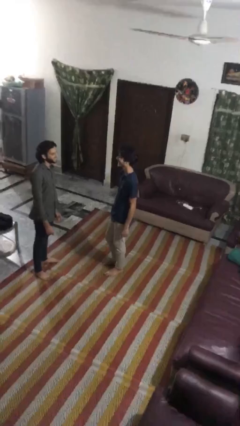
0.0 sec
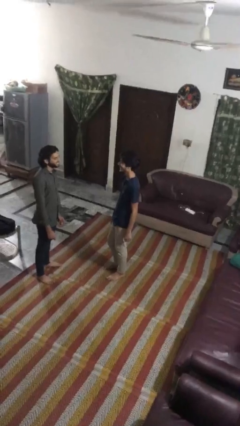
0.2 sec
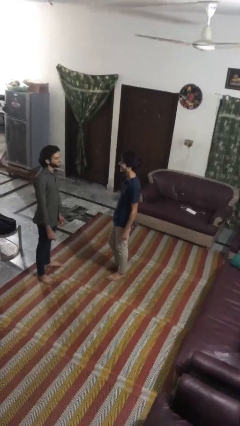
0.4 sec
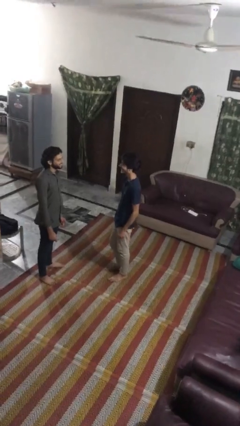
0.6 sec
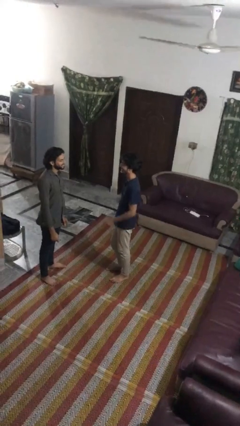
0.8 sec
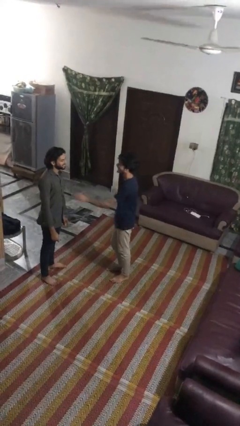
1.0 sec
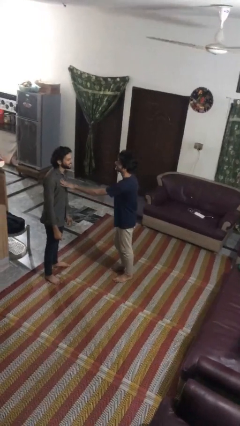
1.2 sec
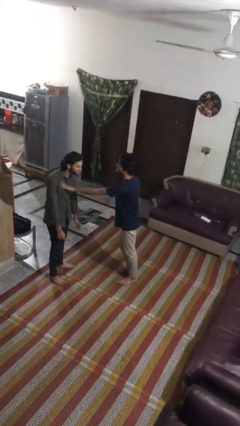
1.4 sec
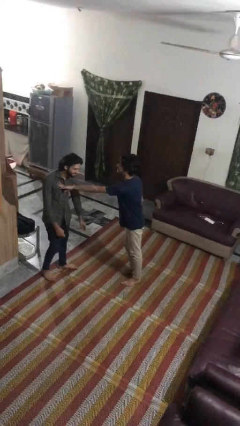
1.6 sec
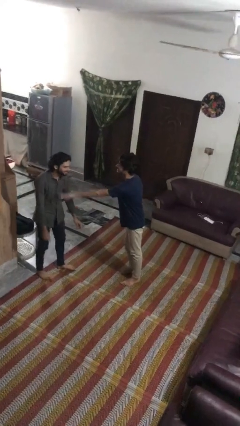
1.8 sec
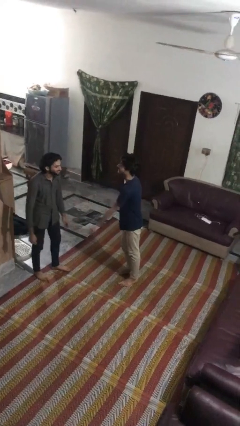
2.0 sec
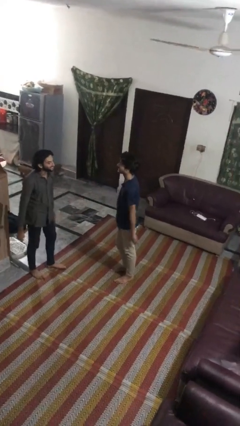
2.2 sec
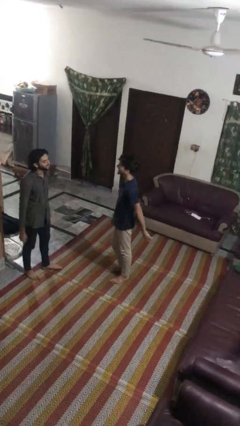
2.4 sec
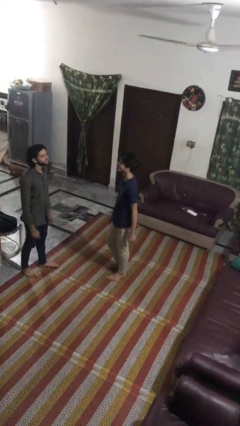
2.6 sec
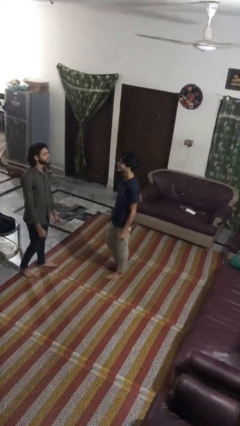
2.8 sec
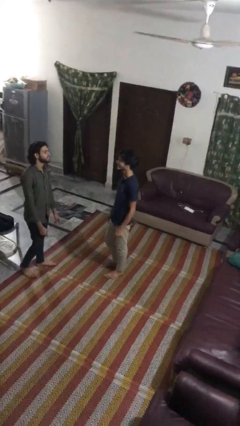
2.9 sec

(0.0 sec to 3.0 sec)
person shoves person

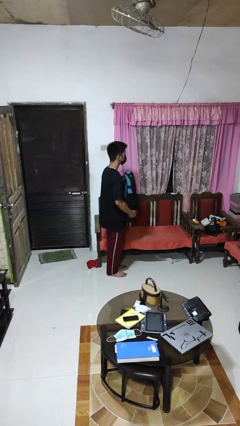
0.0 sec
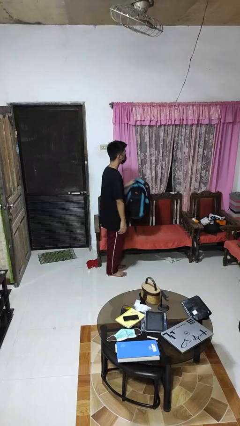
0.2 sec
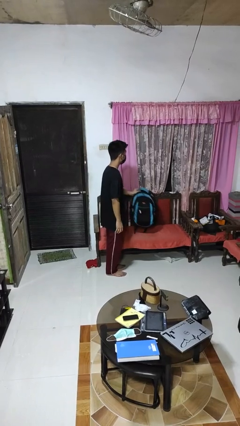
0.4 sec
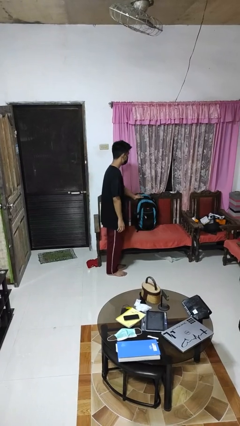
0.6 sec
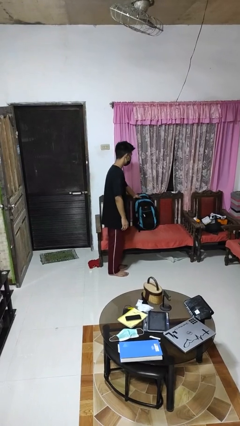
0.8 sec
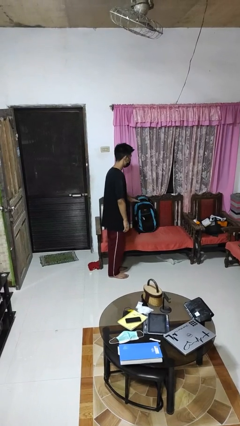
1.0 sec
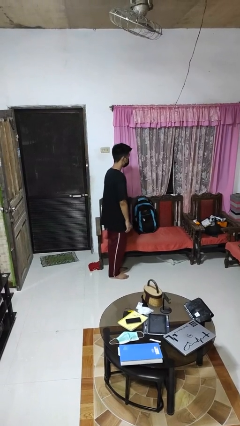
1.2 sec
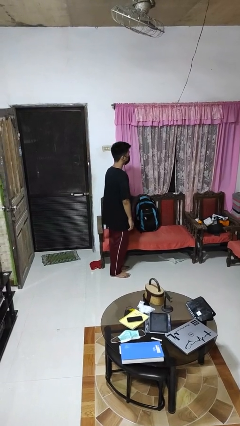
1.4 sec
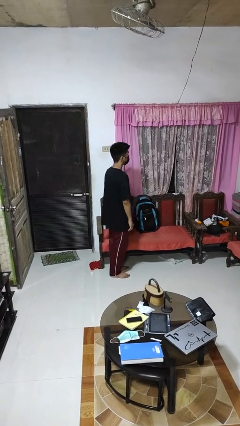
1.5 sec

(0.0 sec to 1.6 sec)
person puts down object on couch

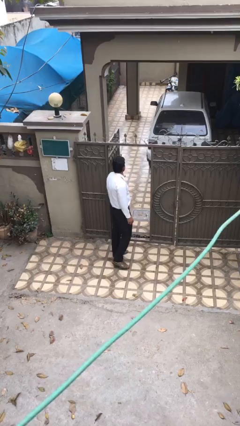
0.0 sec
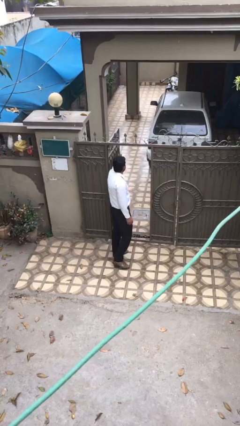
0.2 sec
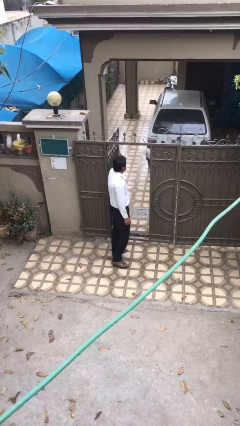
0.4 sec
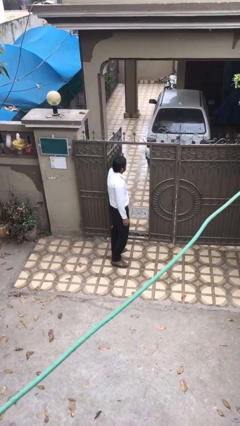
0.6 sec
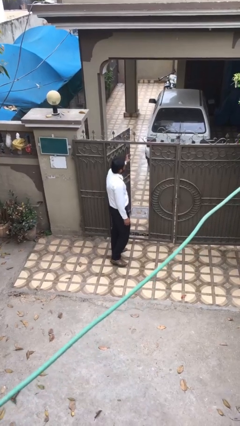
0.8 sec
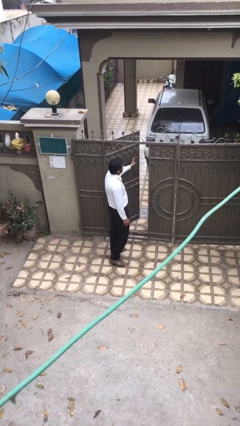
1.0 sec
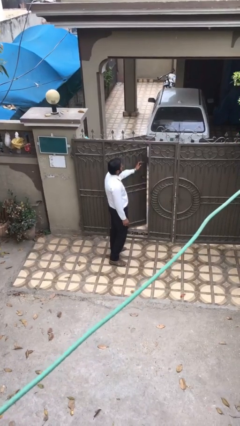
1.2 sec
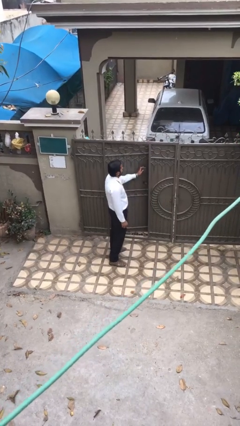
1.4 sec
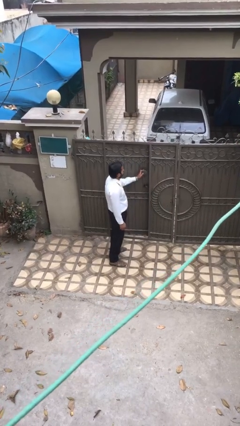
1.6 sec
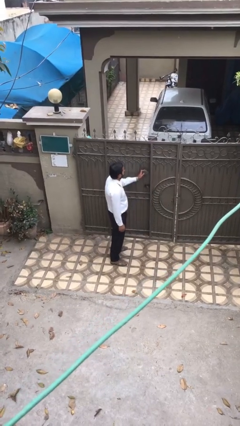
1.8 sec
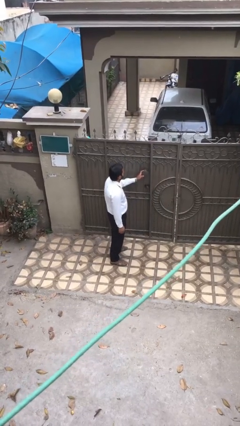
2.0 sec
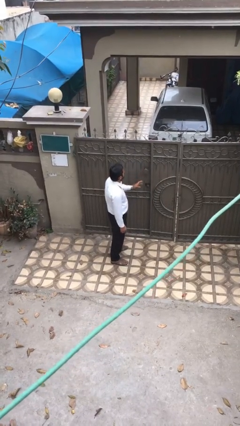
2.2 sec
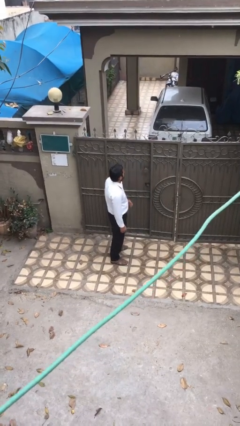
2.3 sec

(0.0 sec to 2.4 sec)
person closes facility door

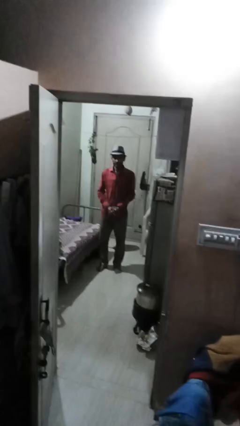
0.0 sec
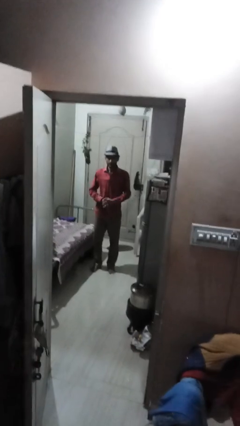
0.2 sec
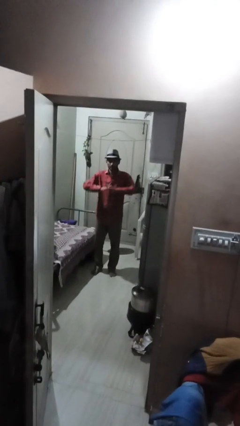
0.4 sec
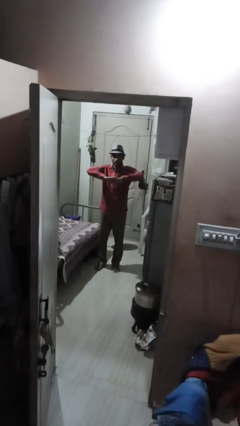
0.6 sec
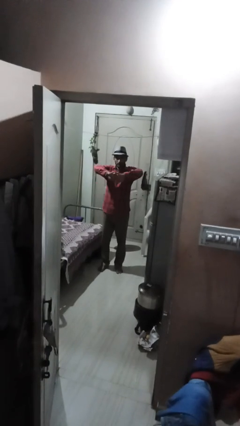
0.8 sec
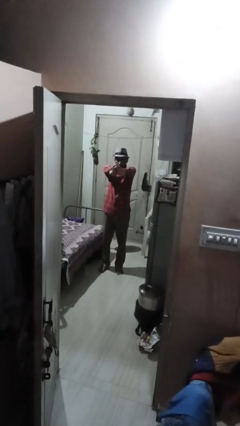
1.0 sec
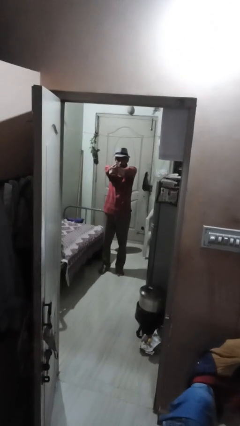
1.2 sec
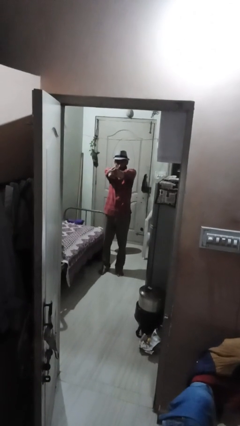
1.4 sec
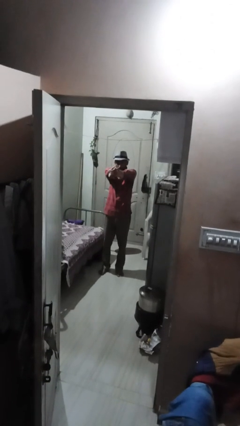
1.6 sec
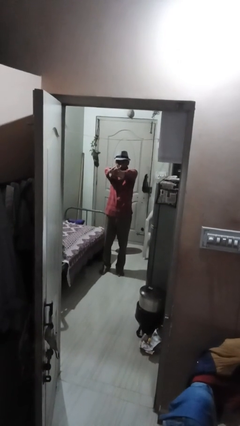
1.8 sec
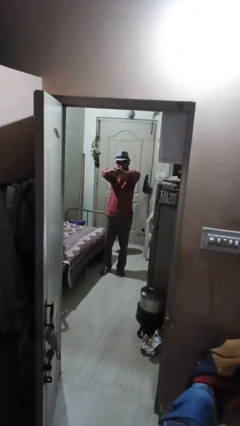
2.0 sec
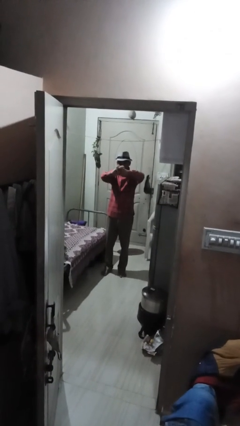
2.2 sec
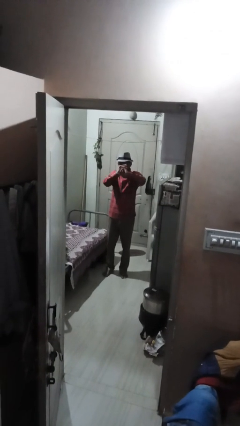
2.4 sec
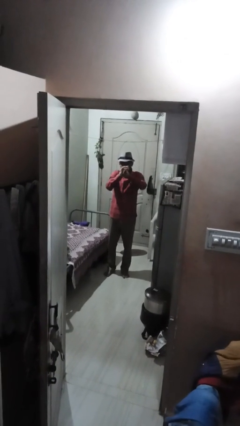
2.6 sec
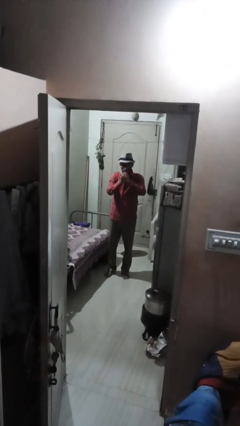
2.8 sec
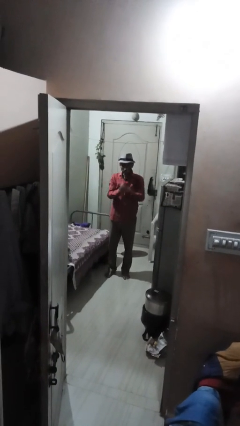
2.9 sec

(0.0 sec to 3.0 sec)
person cracks knuckles

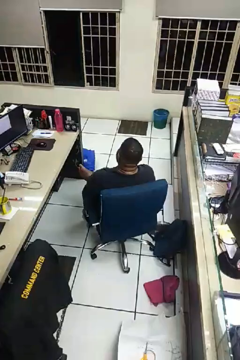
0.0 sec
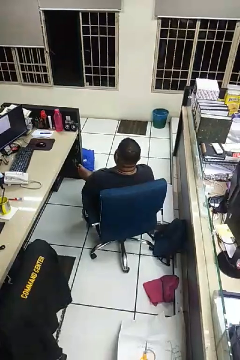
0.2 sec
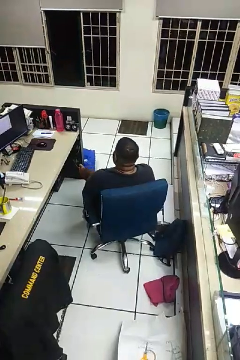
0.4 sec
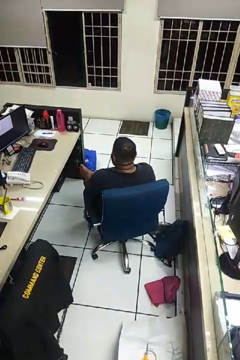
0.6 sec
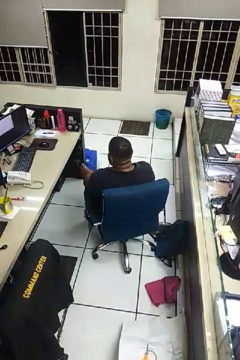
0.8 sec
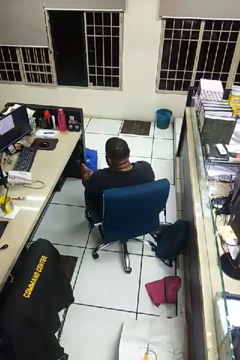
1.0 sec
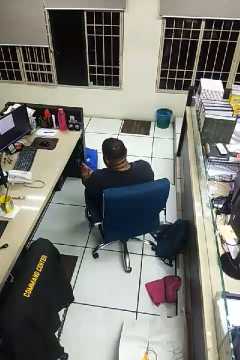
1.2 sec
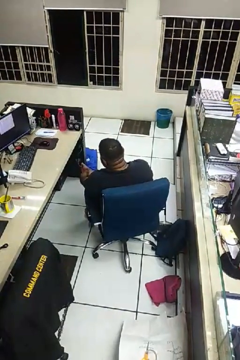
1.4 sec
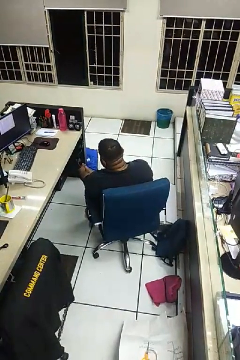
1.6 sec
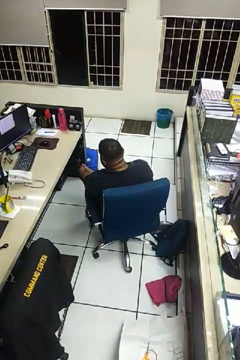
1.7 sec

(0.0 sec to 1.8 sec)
person rubs foot

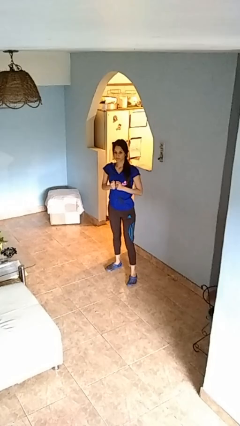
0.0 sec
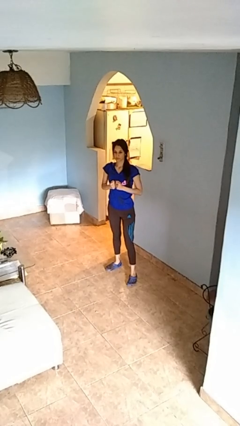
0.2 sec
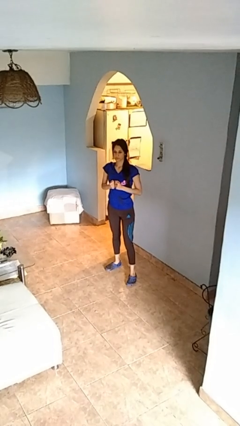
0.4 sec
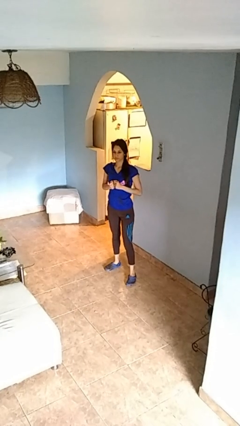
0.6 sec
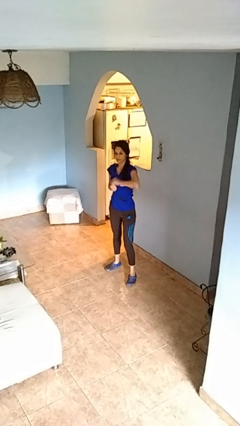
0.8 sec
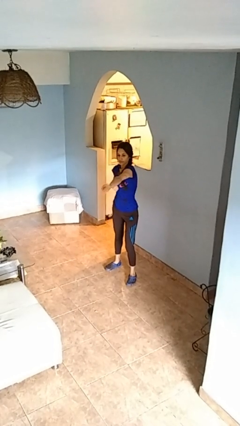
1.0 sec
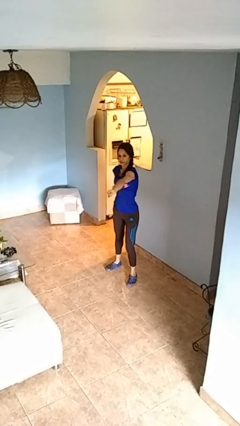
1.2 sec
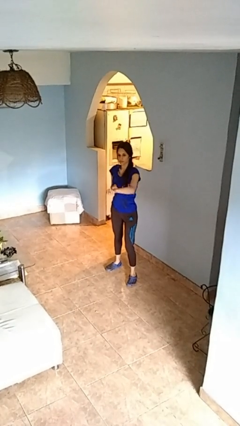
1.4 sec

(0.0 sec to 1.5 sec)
person punches

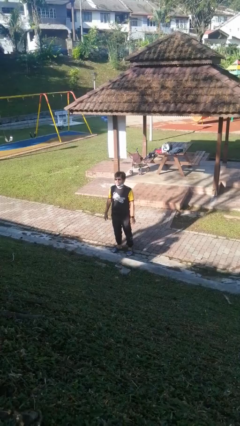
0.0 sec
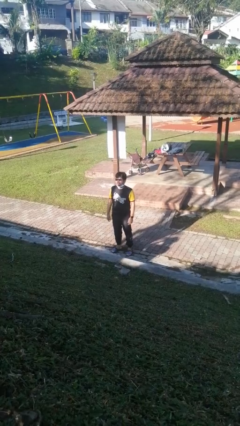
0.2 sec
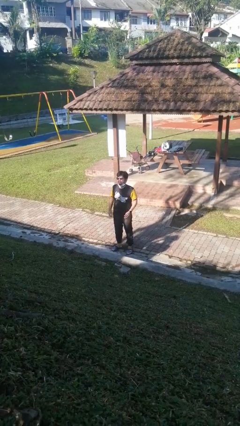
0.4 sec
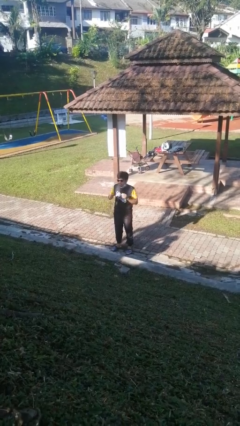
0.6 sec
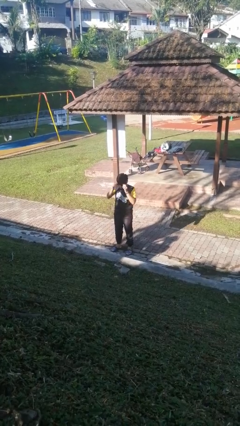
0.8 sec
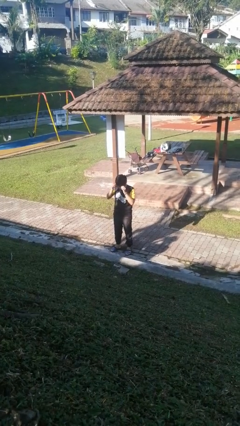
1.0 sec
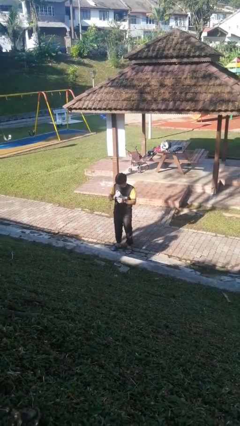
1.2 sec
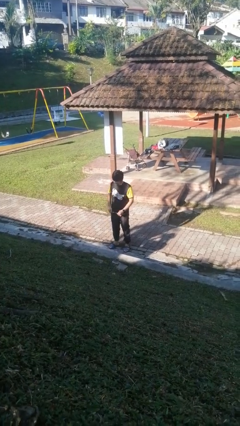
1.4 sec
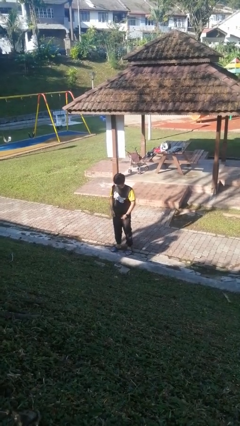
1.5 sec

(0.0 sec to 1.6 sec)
person takes off sunglasses

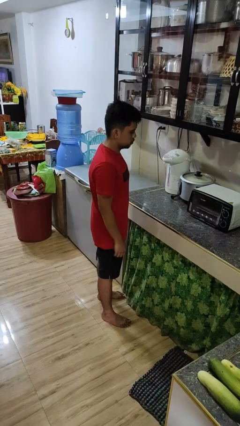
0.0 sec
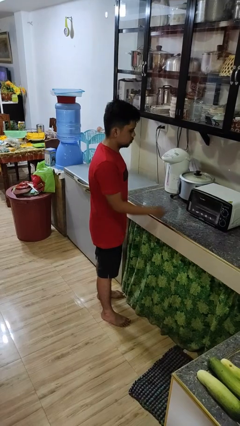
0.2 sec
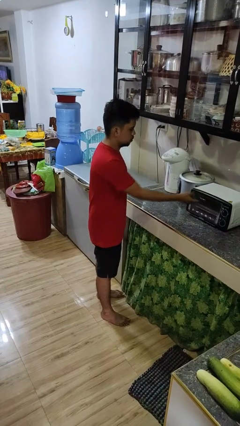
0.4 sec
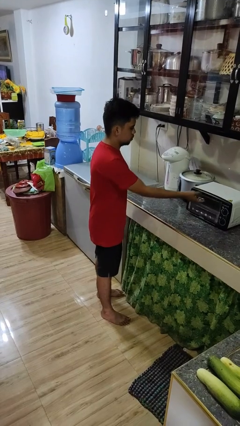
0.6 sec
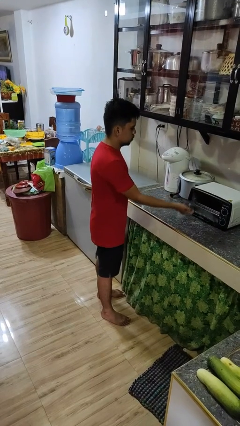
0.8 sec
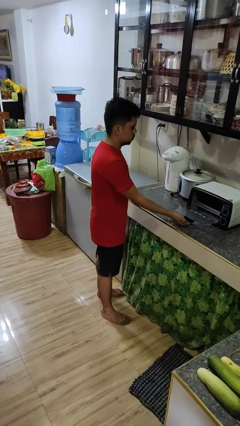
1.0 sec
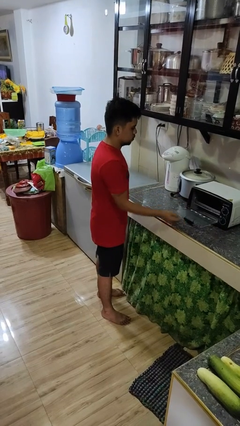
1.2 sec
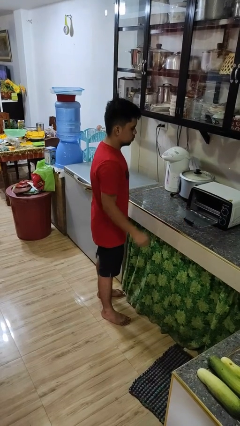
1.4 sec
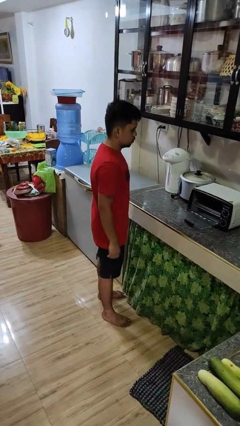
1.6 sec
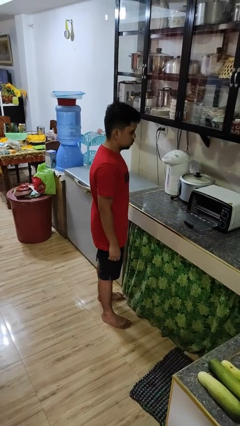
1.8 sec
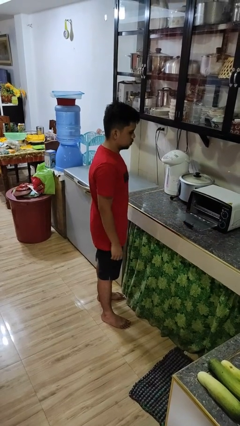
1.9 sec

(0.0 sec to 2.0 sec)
person opens microwave

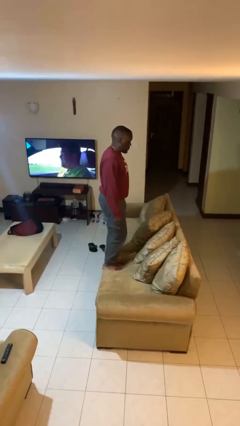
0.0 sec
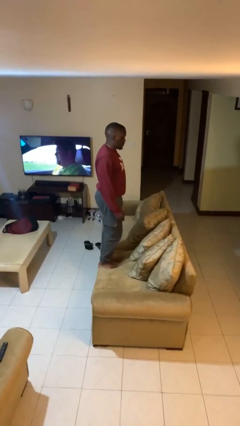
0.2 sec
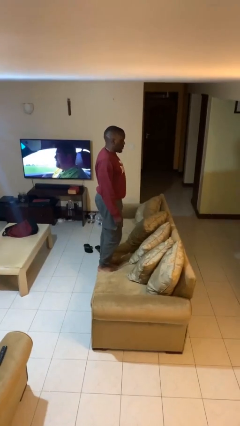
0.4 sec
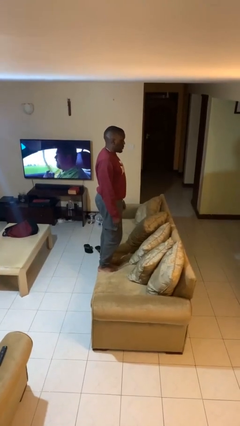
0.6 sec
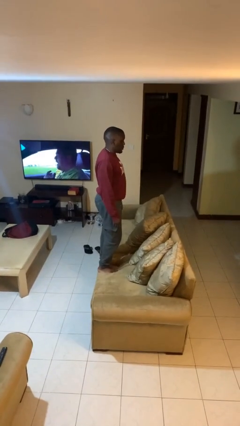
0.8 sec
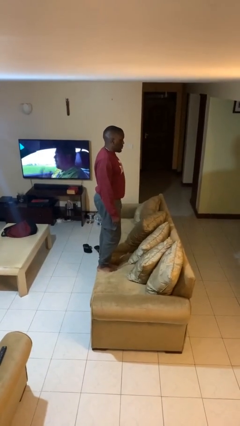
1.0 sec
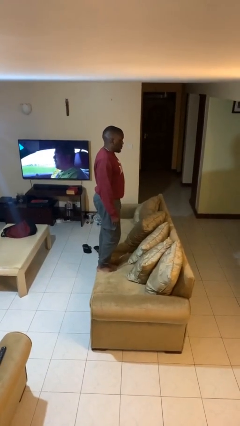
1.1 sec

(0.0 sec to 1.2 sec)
person climbs on couch
